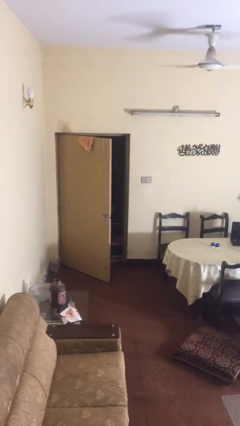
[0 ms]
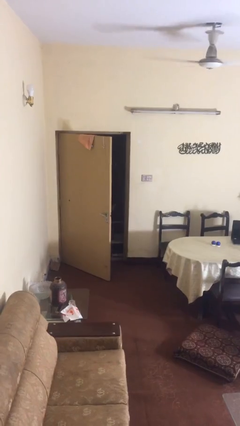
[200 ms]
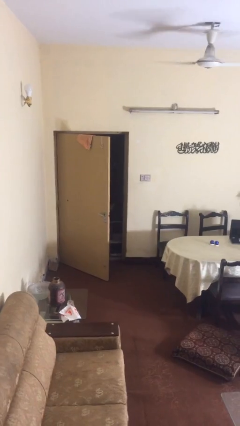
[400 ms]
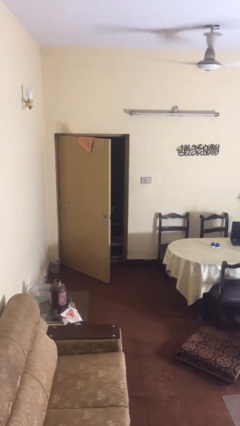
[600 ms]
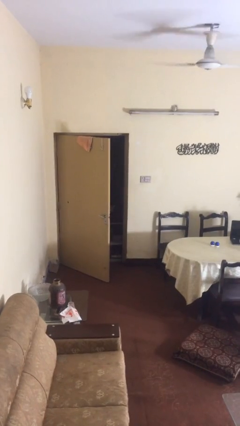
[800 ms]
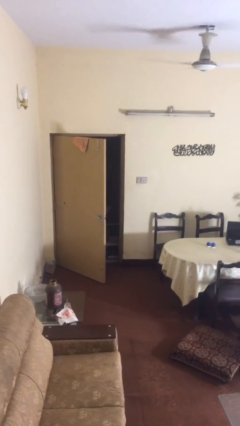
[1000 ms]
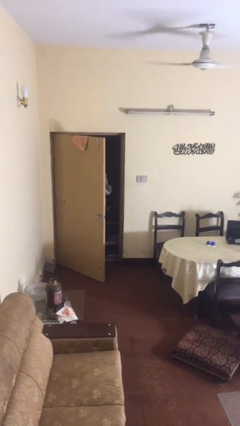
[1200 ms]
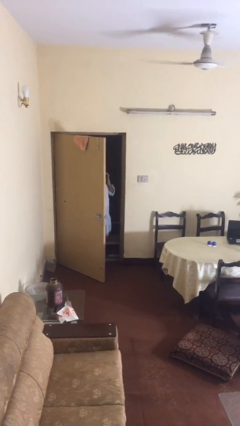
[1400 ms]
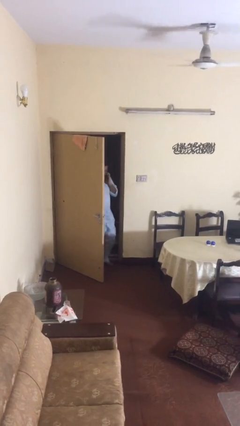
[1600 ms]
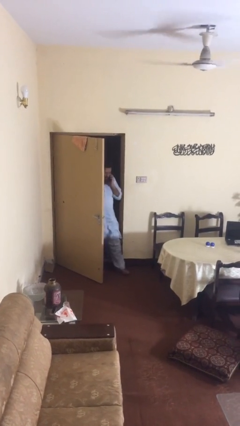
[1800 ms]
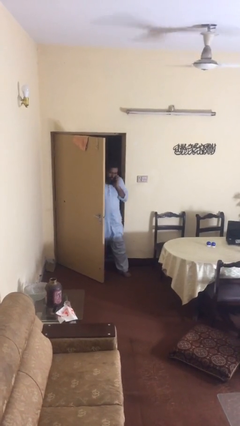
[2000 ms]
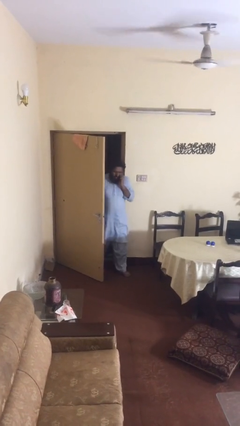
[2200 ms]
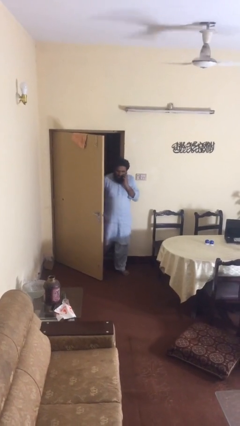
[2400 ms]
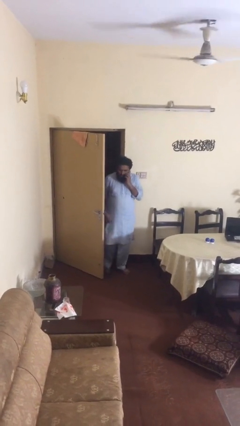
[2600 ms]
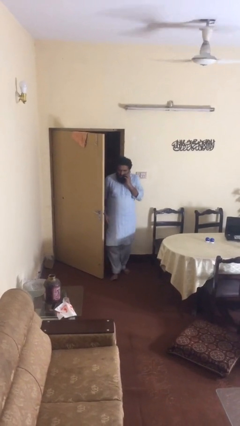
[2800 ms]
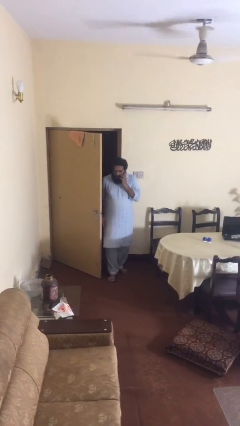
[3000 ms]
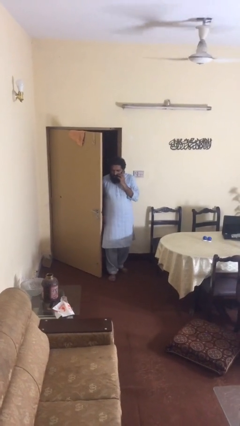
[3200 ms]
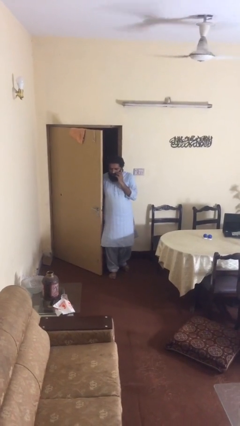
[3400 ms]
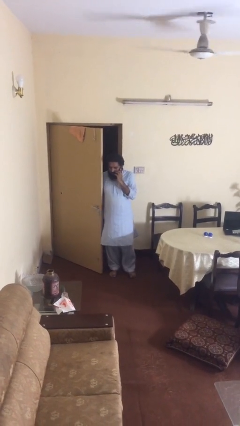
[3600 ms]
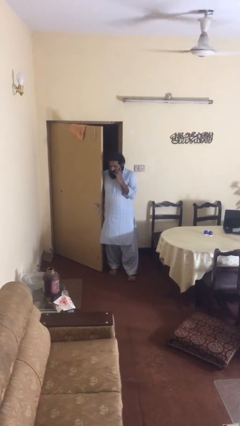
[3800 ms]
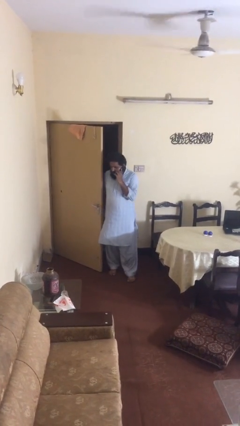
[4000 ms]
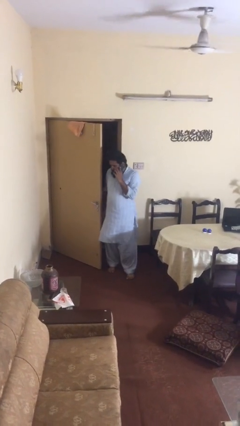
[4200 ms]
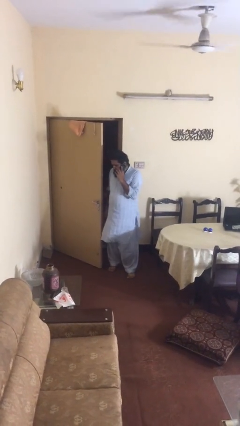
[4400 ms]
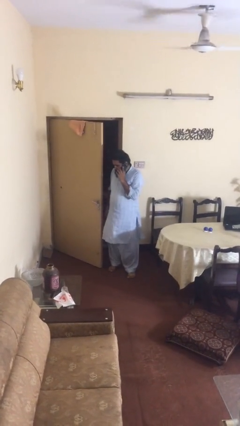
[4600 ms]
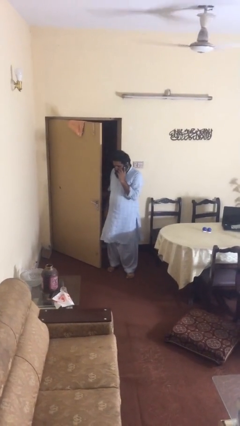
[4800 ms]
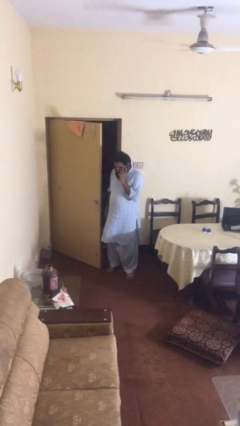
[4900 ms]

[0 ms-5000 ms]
person enters scene through structure

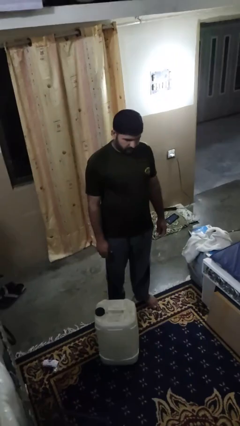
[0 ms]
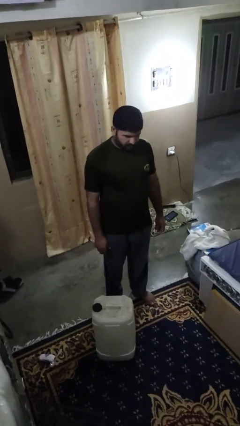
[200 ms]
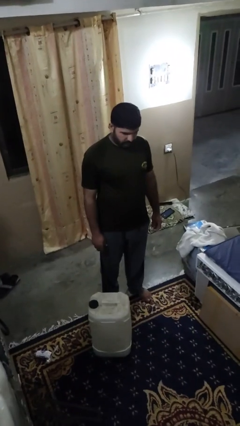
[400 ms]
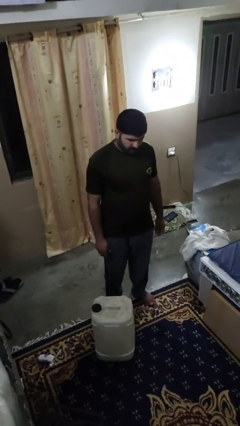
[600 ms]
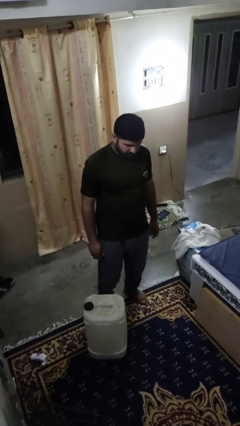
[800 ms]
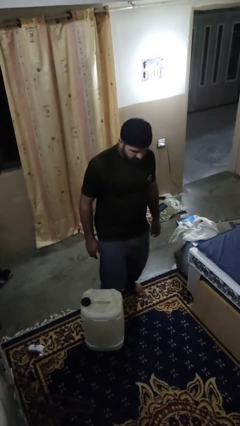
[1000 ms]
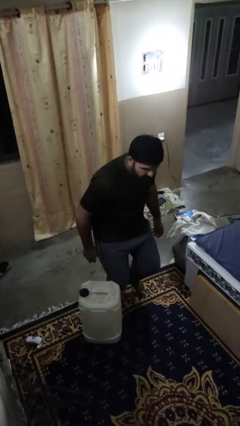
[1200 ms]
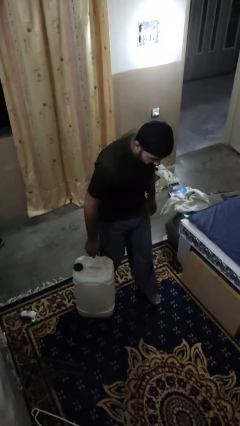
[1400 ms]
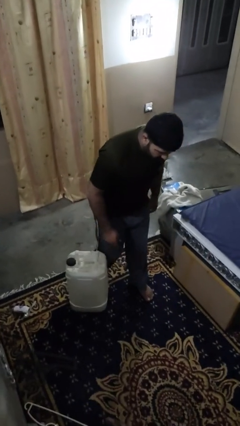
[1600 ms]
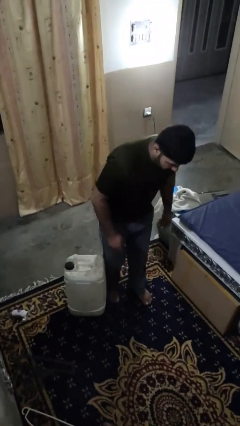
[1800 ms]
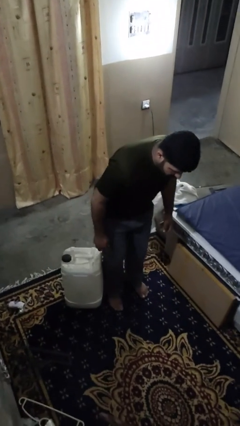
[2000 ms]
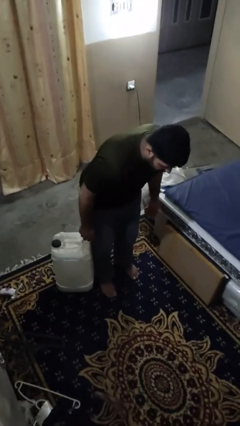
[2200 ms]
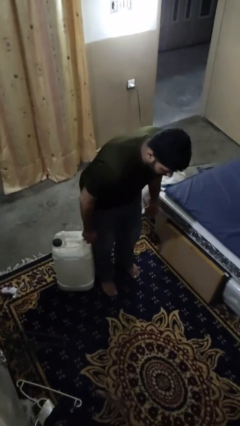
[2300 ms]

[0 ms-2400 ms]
person trips on object on floor

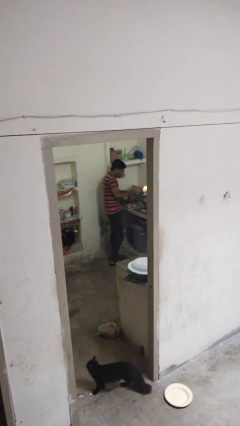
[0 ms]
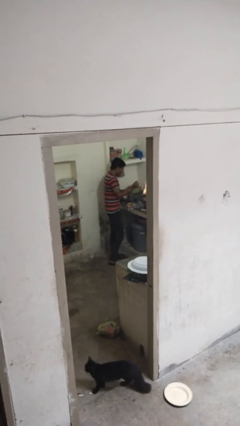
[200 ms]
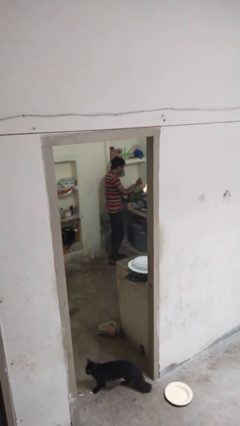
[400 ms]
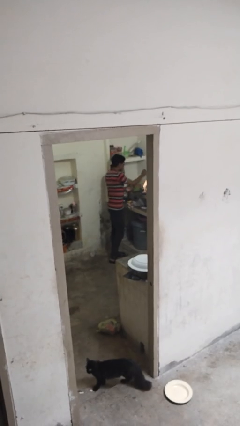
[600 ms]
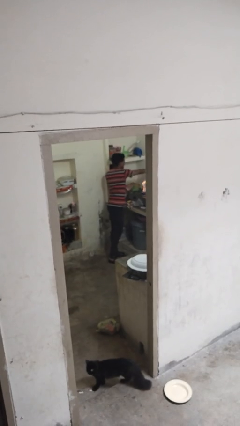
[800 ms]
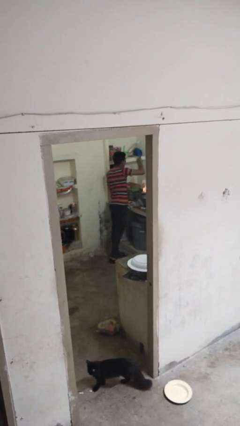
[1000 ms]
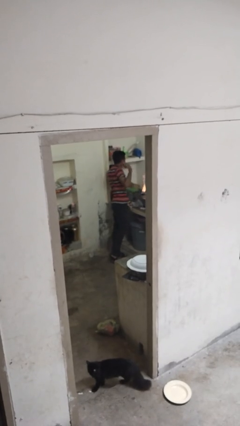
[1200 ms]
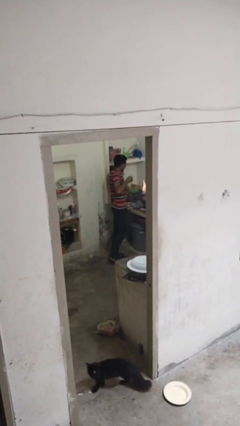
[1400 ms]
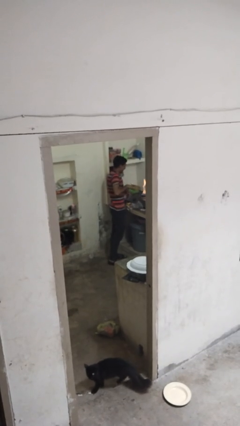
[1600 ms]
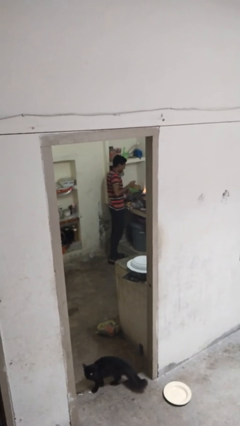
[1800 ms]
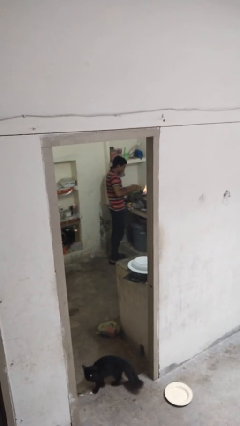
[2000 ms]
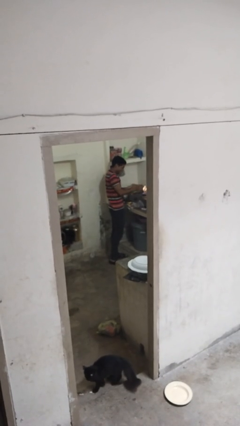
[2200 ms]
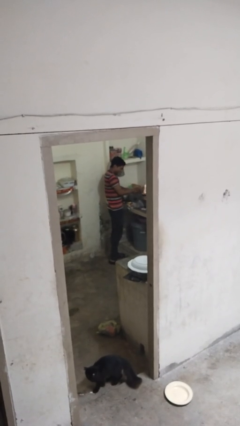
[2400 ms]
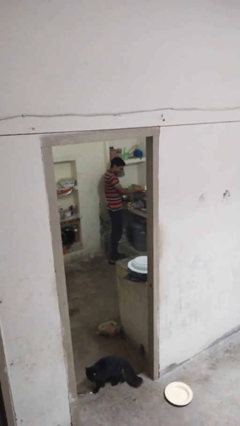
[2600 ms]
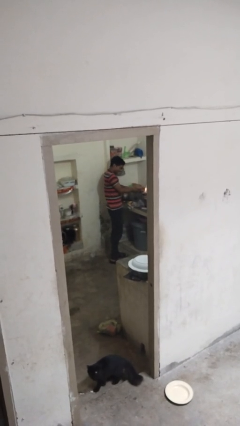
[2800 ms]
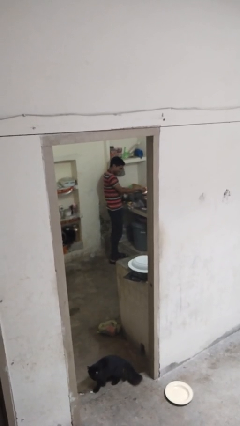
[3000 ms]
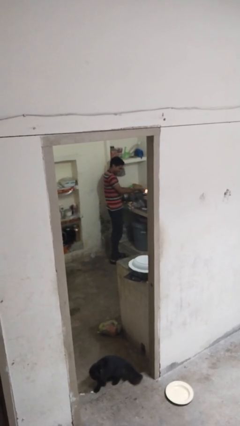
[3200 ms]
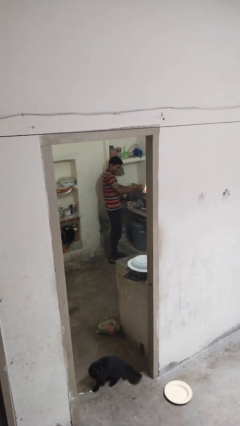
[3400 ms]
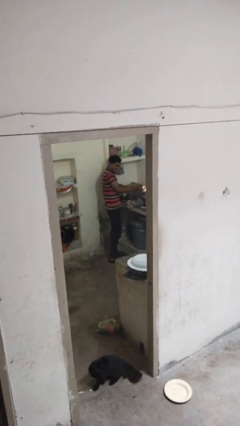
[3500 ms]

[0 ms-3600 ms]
person burns hand

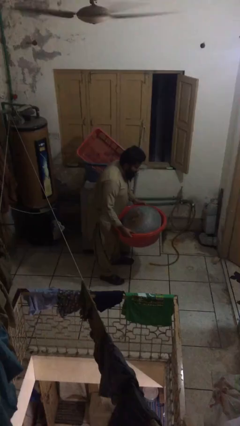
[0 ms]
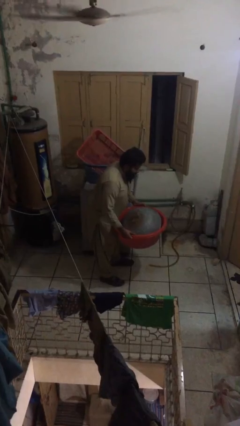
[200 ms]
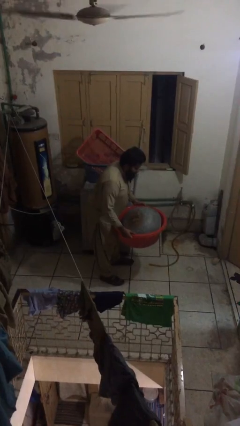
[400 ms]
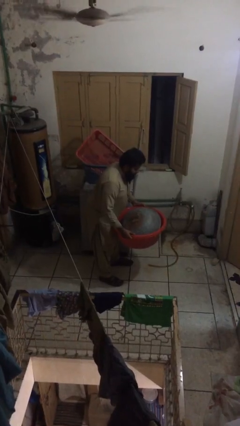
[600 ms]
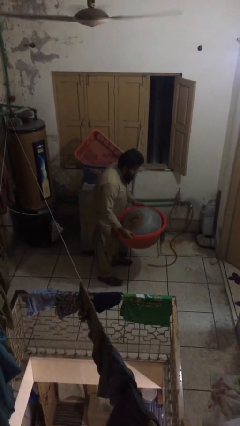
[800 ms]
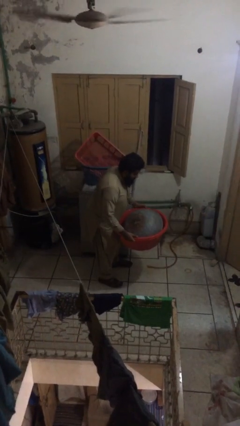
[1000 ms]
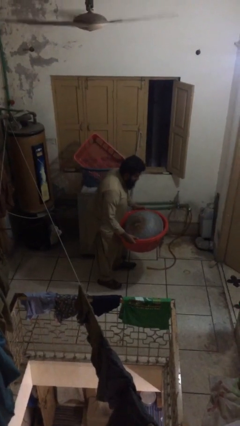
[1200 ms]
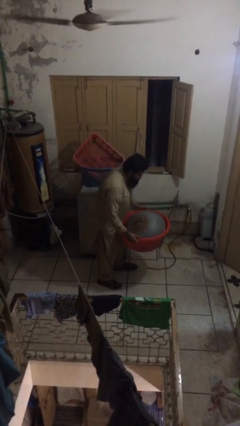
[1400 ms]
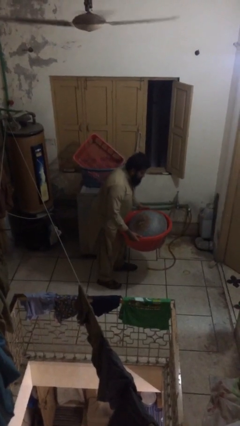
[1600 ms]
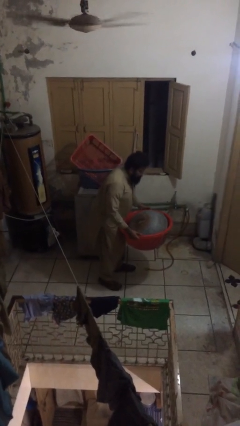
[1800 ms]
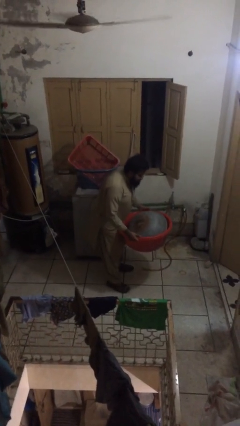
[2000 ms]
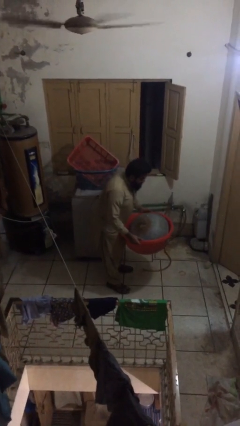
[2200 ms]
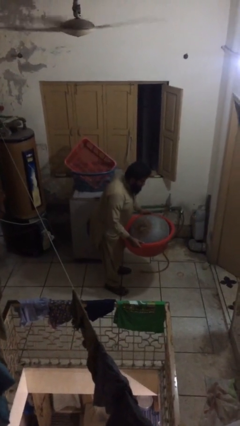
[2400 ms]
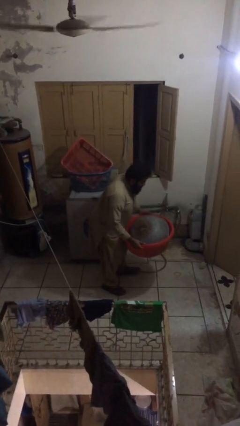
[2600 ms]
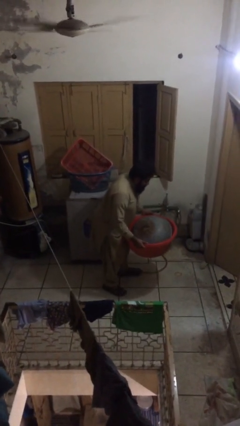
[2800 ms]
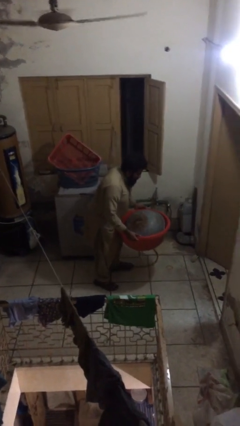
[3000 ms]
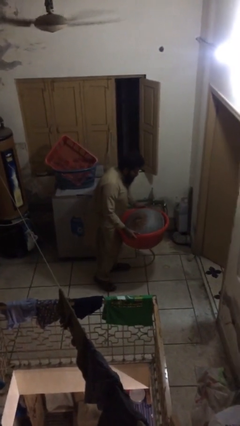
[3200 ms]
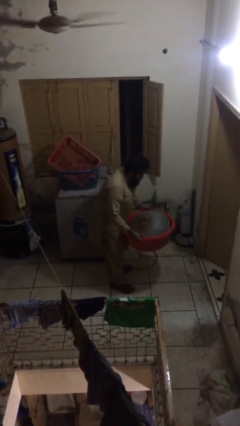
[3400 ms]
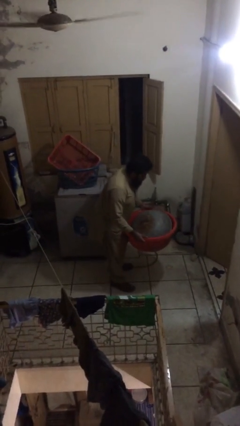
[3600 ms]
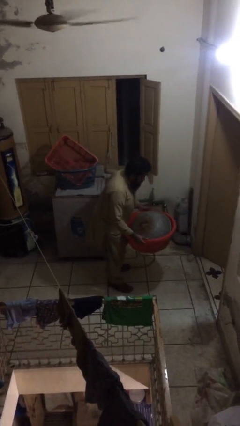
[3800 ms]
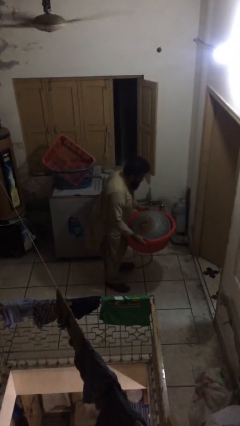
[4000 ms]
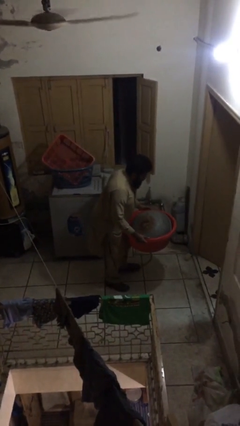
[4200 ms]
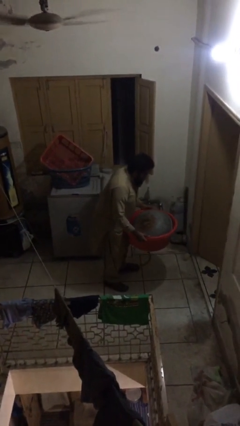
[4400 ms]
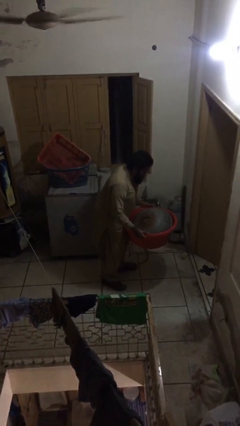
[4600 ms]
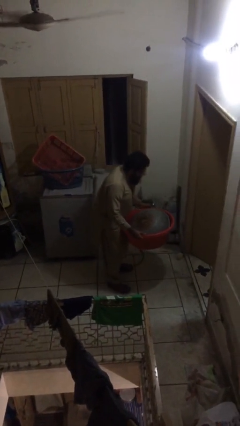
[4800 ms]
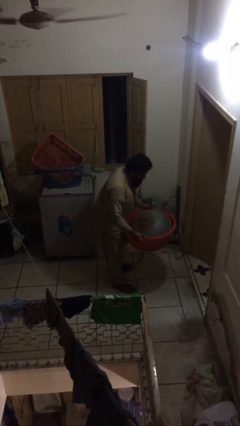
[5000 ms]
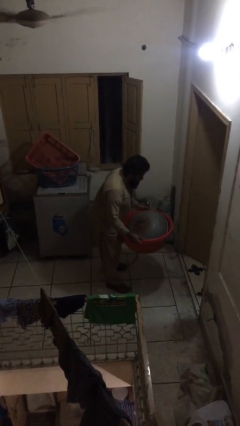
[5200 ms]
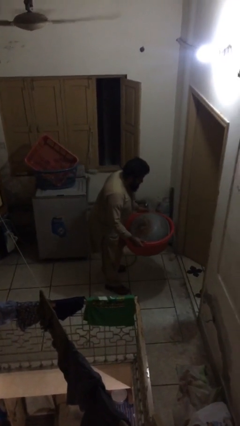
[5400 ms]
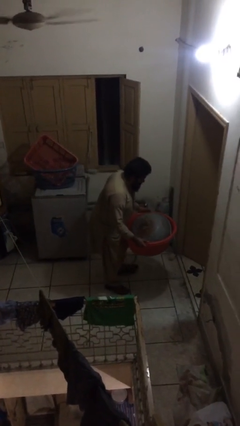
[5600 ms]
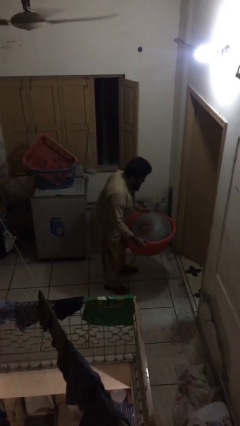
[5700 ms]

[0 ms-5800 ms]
person carries heavy object

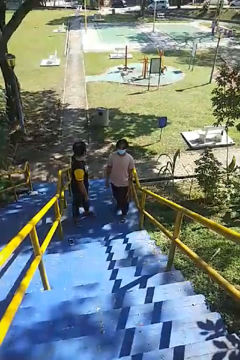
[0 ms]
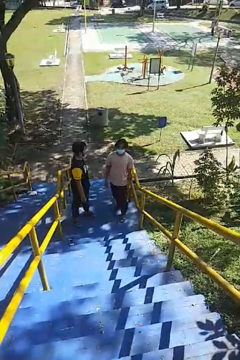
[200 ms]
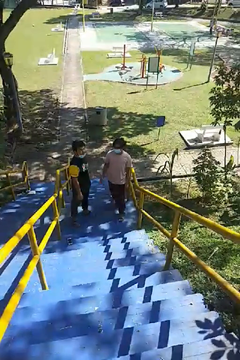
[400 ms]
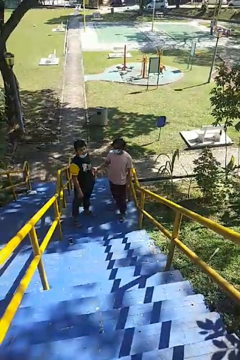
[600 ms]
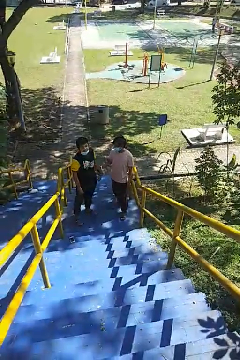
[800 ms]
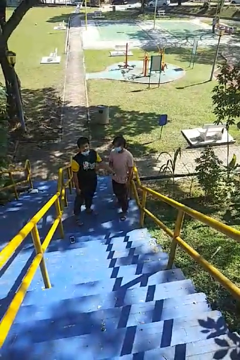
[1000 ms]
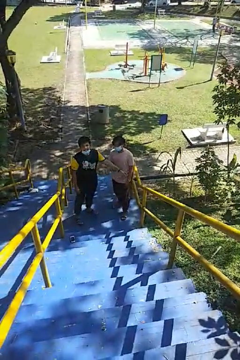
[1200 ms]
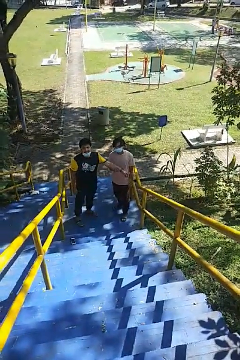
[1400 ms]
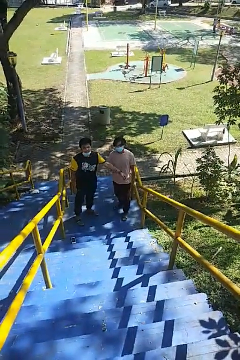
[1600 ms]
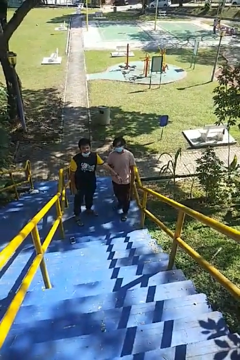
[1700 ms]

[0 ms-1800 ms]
person grabs person by forearm
